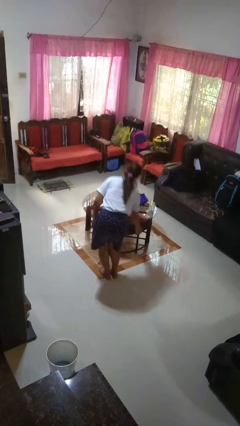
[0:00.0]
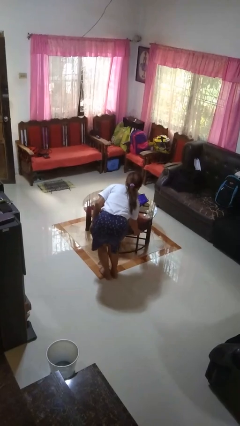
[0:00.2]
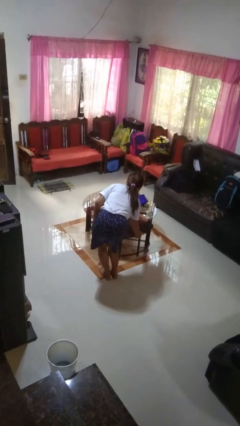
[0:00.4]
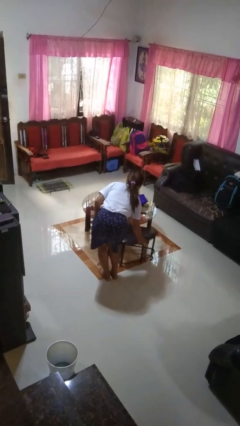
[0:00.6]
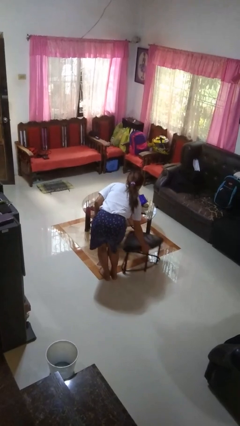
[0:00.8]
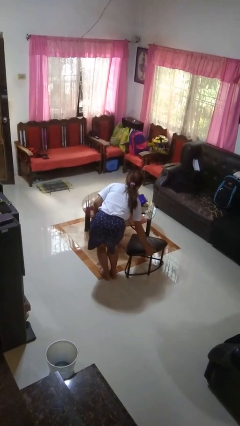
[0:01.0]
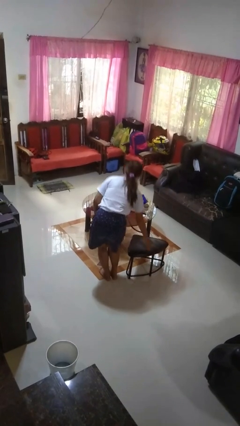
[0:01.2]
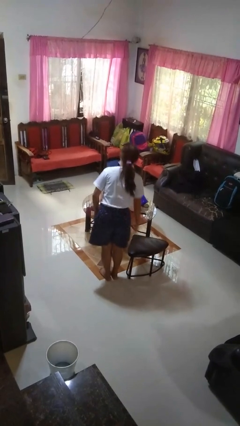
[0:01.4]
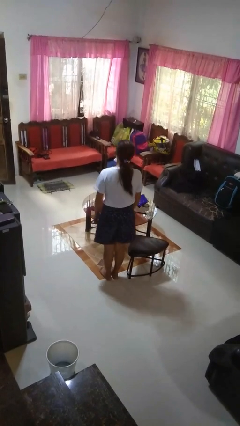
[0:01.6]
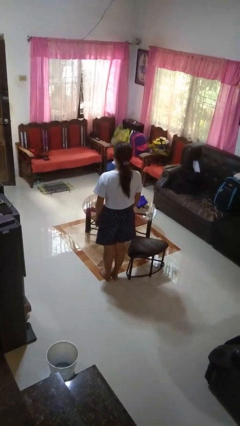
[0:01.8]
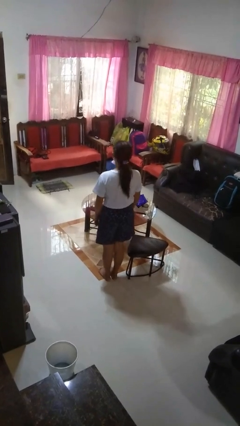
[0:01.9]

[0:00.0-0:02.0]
person pulls out chair

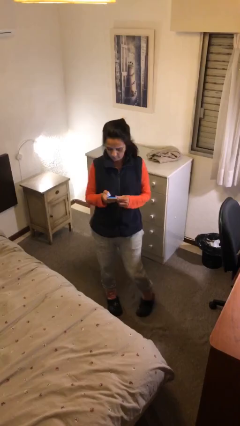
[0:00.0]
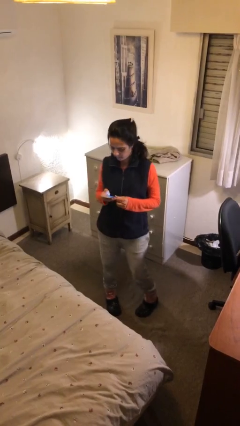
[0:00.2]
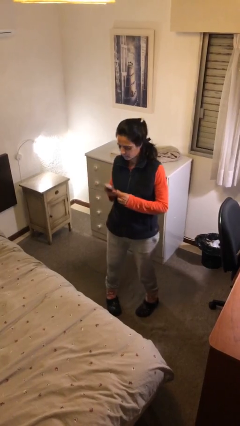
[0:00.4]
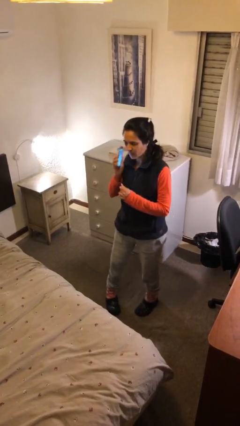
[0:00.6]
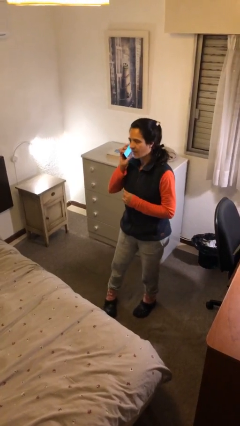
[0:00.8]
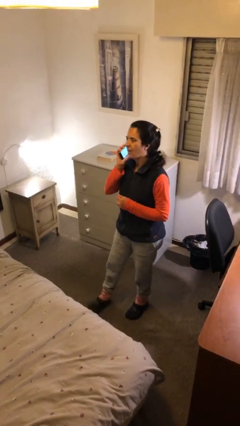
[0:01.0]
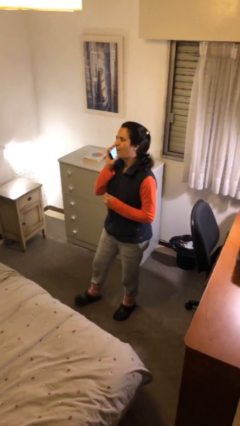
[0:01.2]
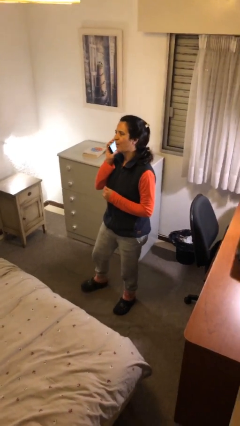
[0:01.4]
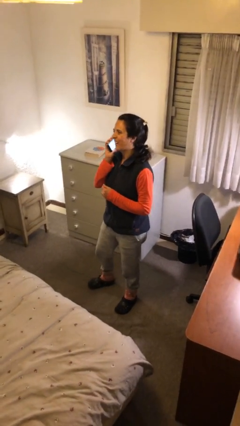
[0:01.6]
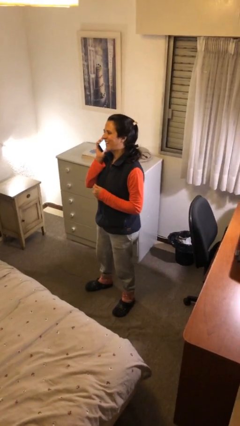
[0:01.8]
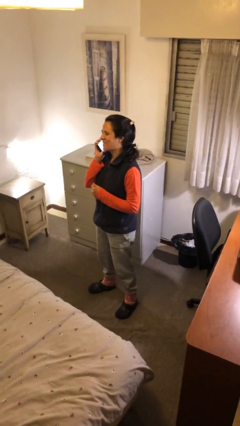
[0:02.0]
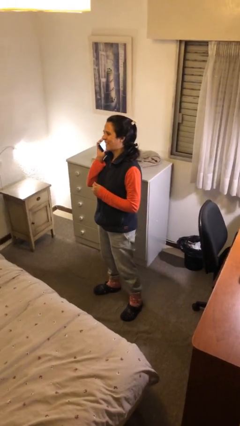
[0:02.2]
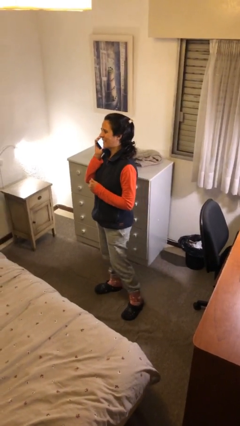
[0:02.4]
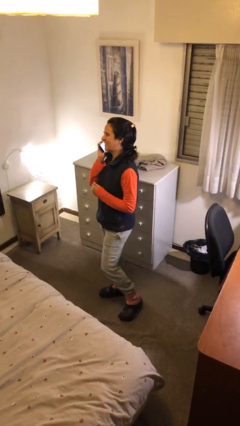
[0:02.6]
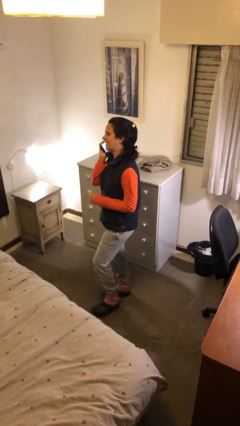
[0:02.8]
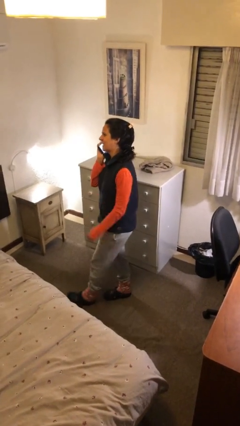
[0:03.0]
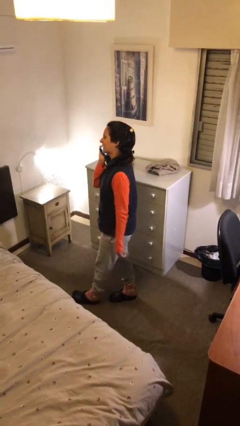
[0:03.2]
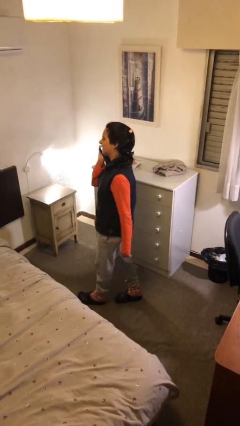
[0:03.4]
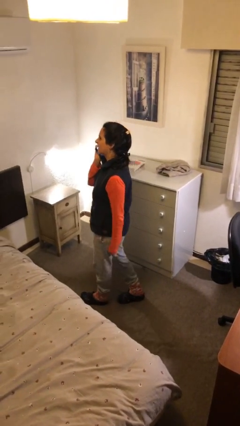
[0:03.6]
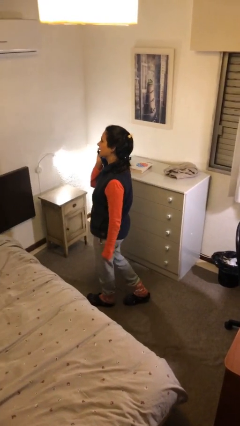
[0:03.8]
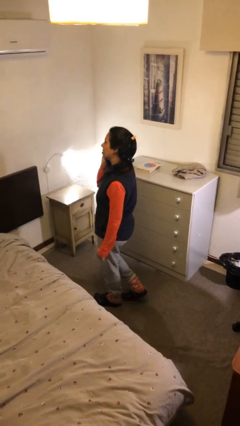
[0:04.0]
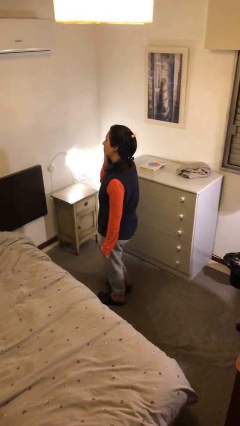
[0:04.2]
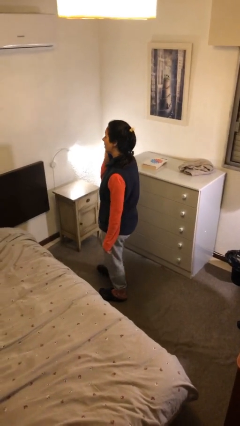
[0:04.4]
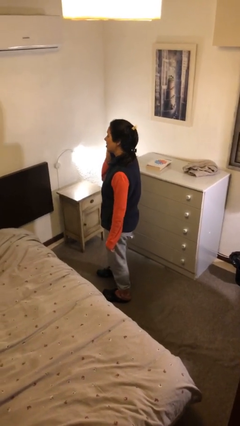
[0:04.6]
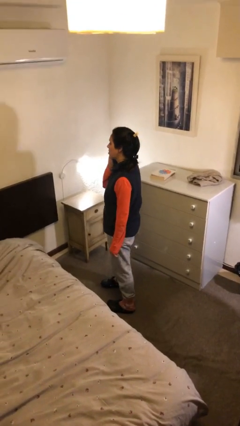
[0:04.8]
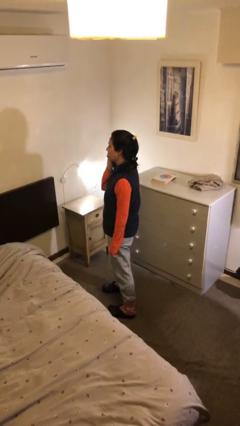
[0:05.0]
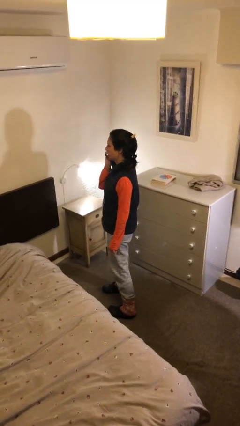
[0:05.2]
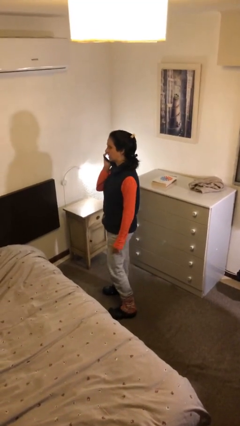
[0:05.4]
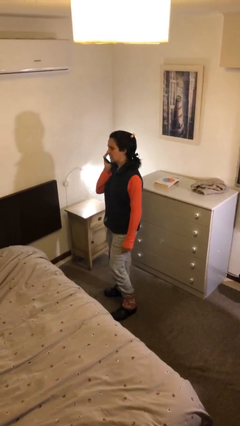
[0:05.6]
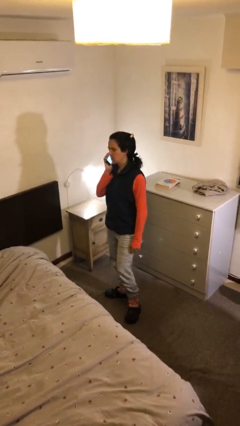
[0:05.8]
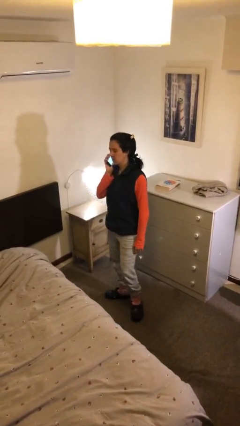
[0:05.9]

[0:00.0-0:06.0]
person talks on phone

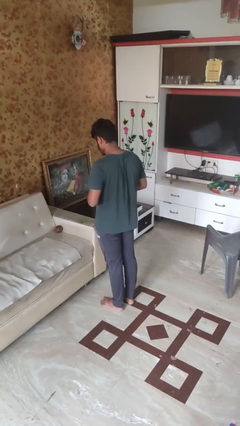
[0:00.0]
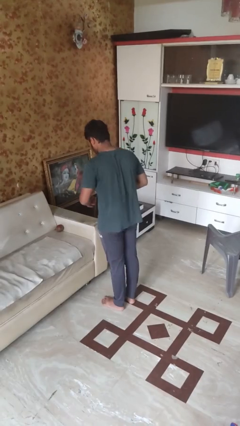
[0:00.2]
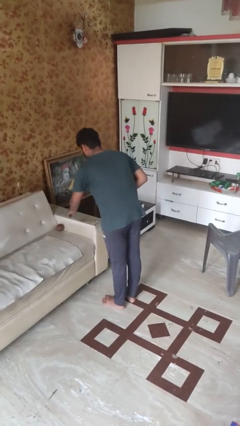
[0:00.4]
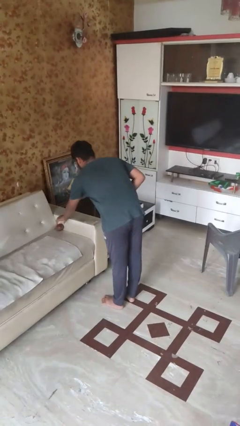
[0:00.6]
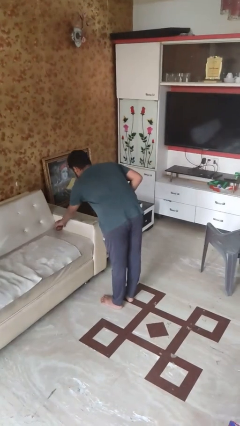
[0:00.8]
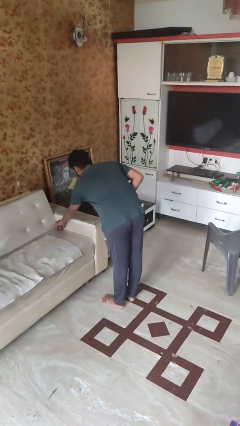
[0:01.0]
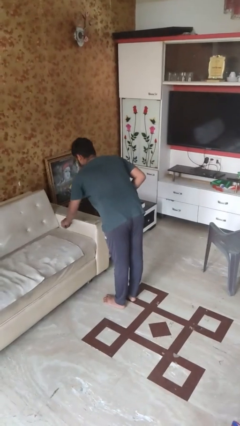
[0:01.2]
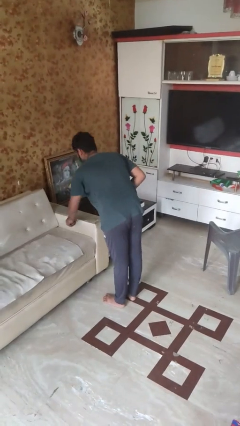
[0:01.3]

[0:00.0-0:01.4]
person picks up object from bed

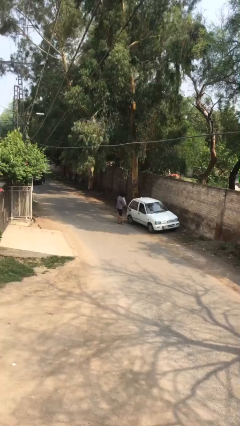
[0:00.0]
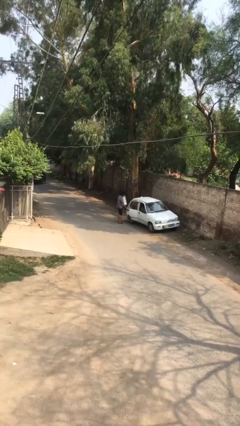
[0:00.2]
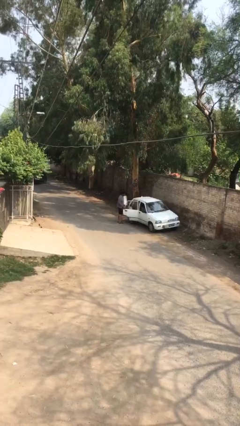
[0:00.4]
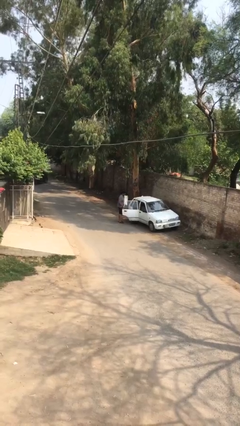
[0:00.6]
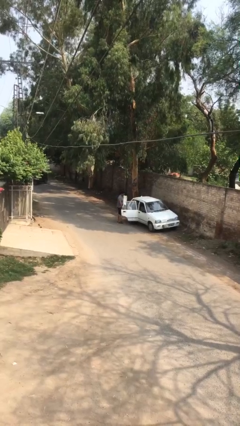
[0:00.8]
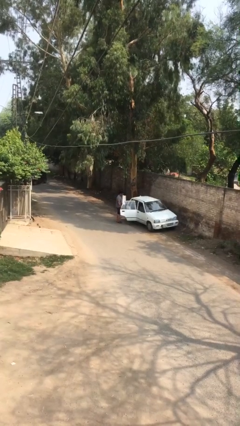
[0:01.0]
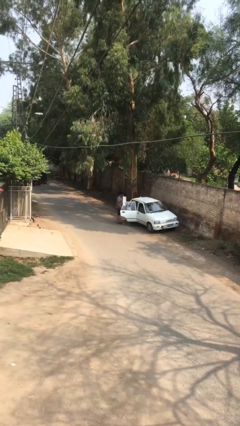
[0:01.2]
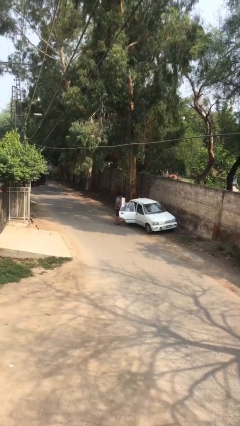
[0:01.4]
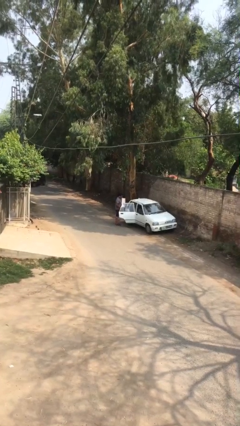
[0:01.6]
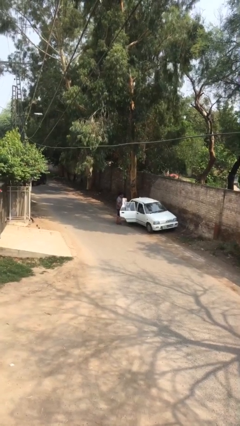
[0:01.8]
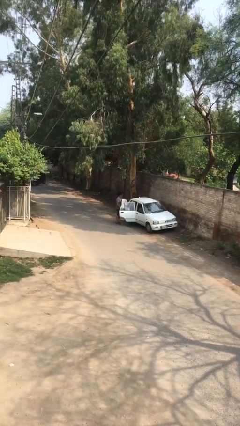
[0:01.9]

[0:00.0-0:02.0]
person opens car door

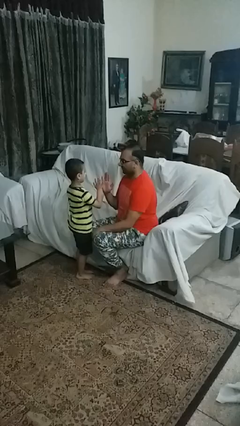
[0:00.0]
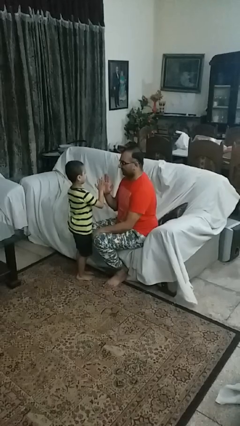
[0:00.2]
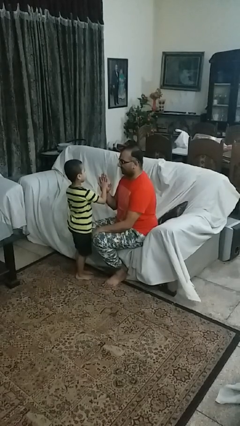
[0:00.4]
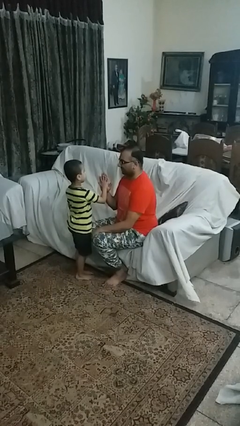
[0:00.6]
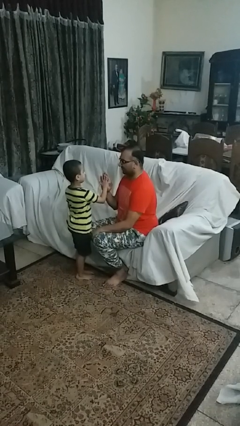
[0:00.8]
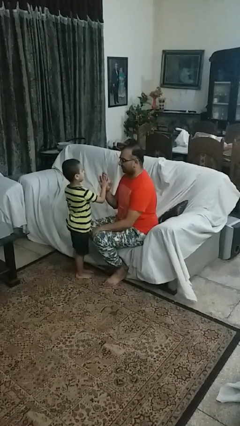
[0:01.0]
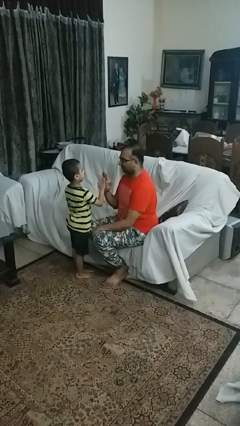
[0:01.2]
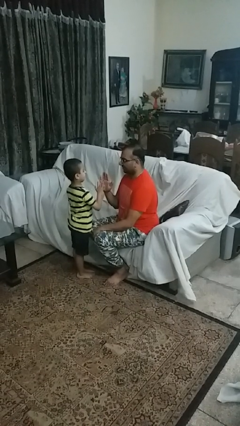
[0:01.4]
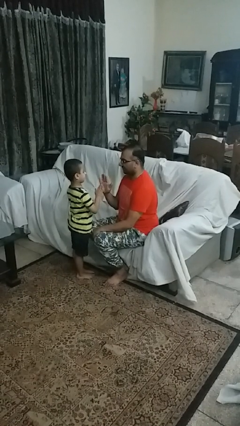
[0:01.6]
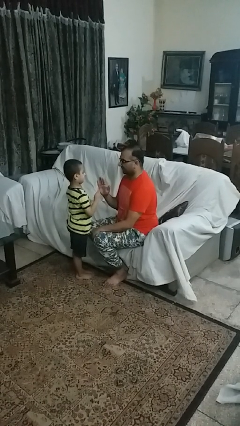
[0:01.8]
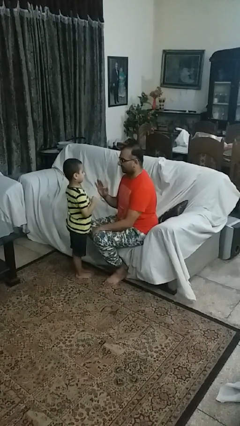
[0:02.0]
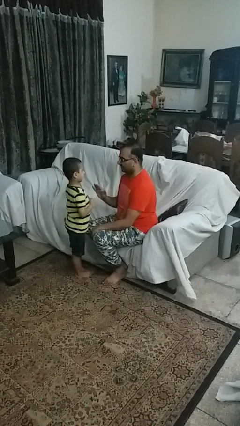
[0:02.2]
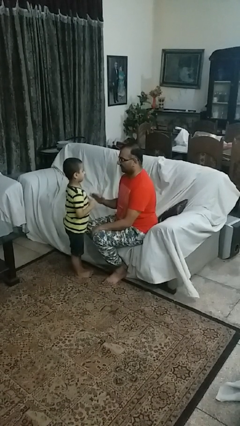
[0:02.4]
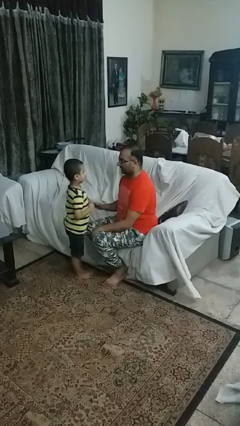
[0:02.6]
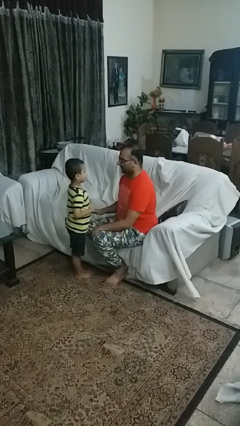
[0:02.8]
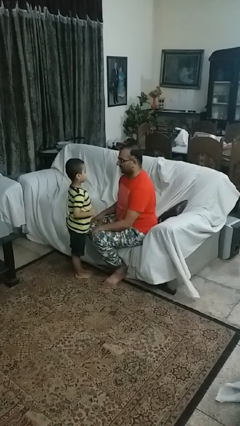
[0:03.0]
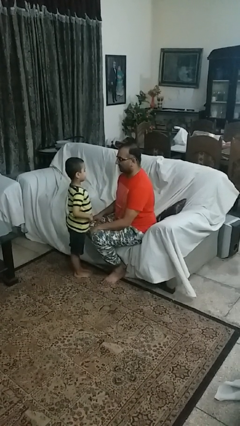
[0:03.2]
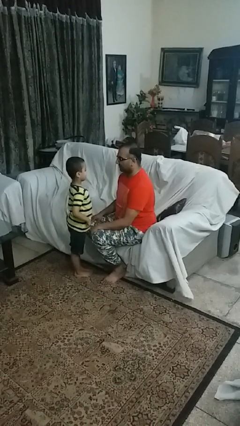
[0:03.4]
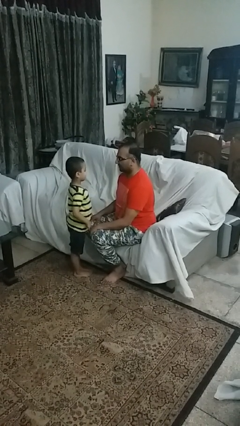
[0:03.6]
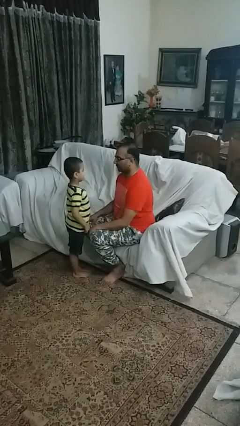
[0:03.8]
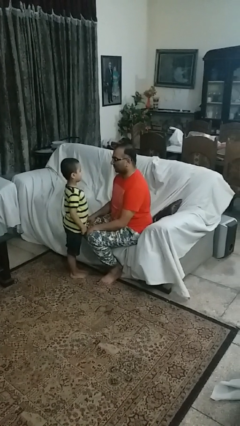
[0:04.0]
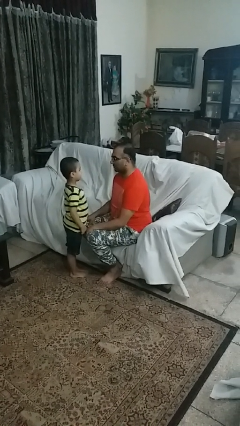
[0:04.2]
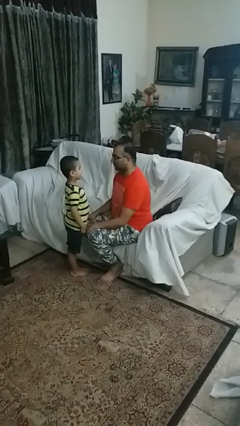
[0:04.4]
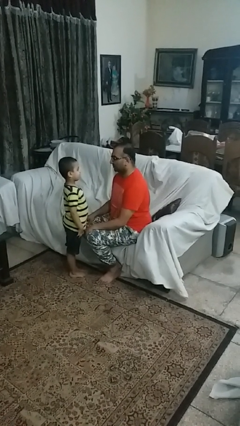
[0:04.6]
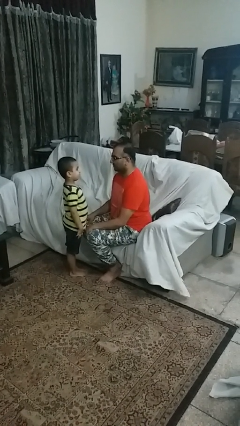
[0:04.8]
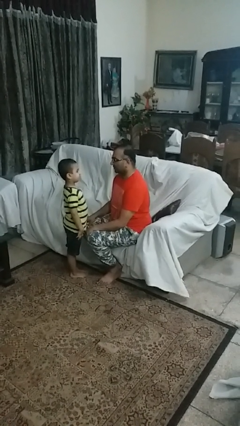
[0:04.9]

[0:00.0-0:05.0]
person highfives hand

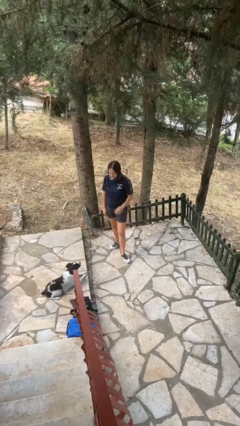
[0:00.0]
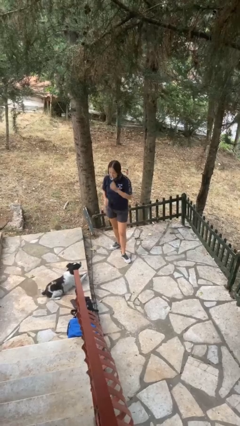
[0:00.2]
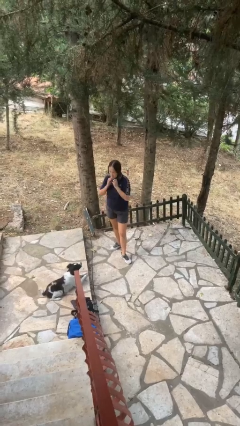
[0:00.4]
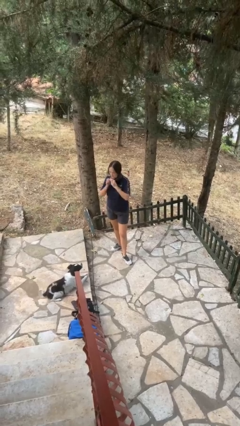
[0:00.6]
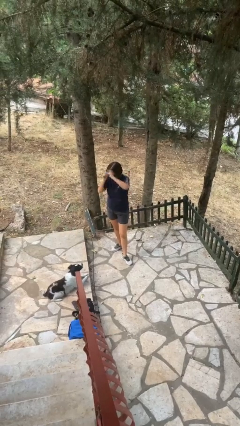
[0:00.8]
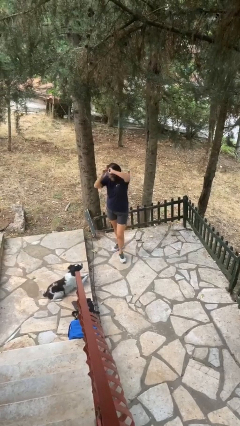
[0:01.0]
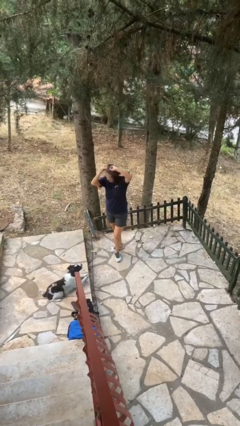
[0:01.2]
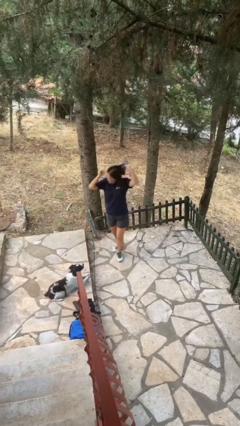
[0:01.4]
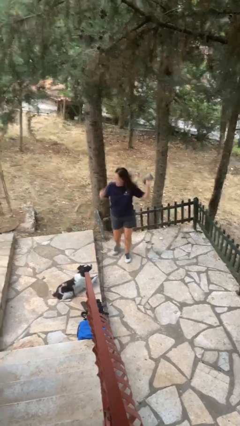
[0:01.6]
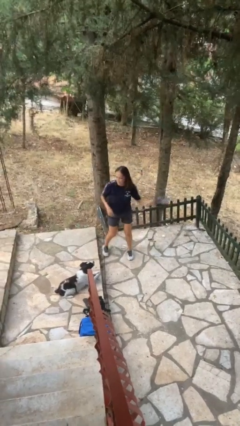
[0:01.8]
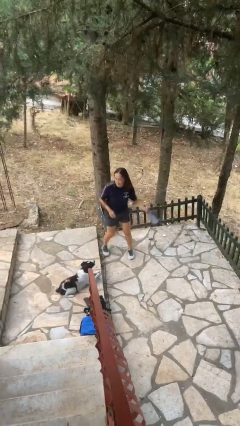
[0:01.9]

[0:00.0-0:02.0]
person takes off scarf
